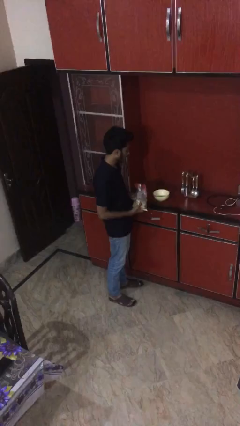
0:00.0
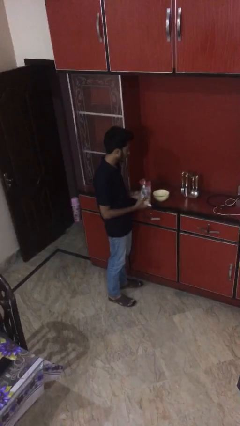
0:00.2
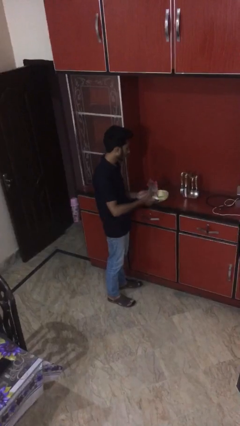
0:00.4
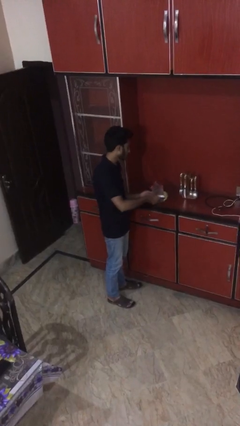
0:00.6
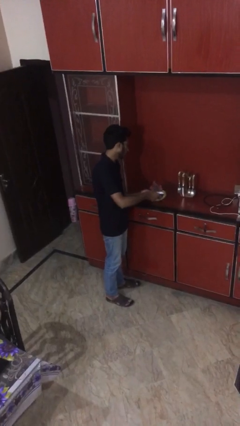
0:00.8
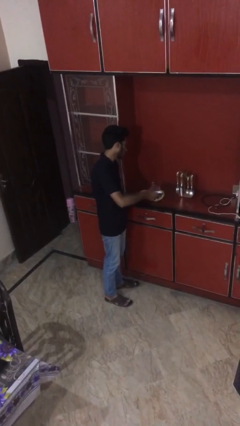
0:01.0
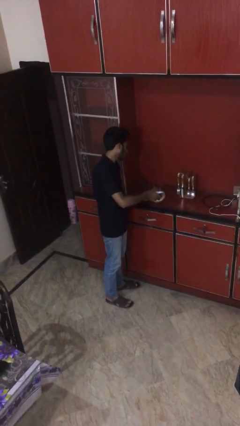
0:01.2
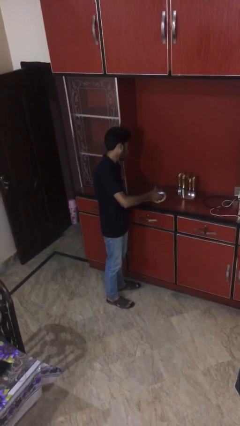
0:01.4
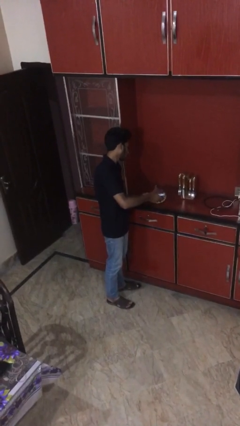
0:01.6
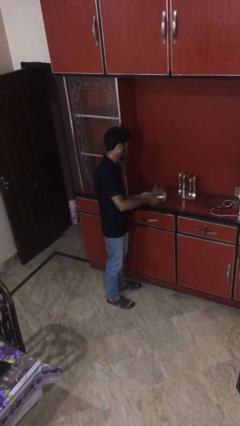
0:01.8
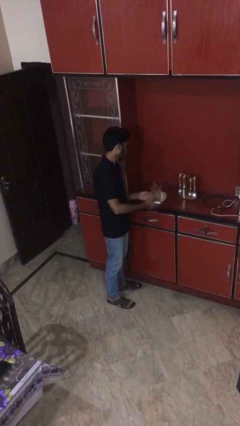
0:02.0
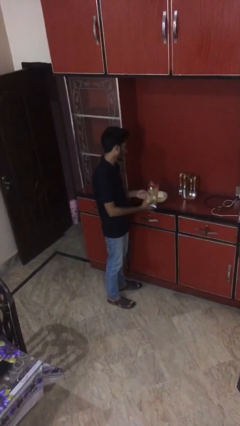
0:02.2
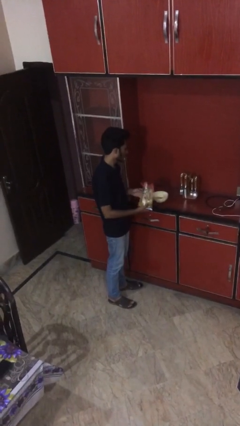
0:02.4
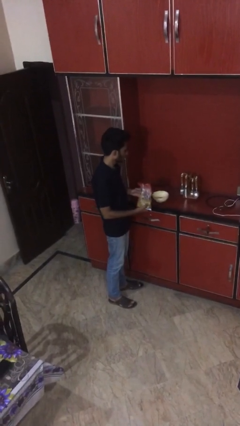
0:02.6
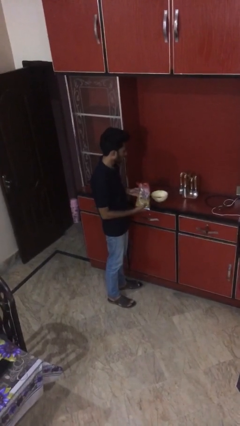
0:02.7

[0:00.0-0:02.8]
person pours into bowl

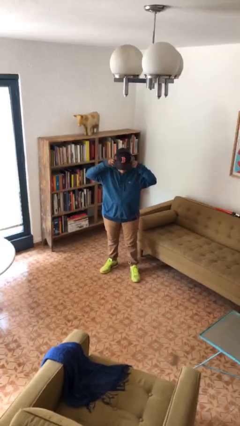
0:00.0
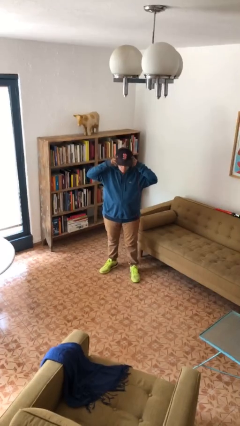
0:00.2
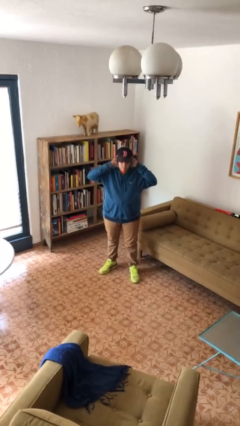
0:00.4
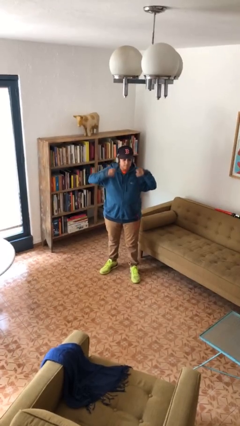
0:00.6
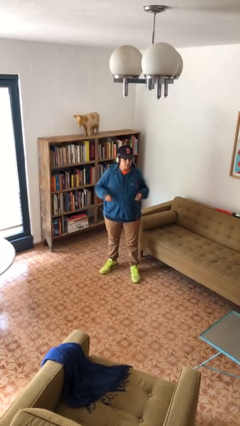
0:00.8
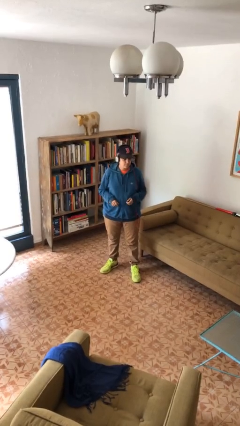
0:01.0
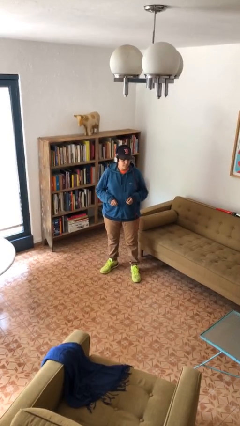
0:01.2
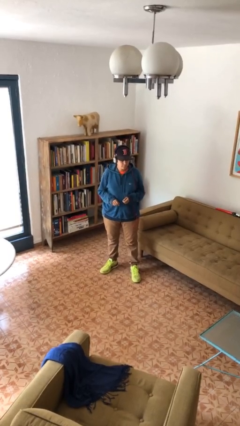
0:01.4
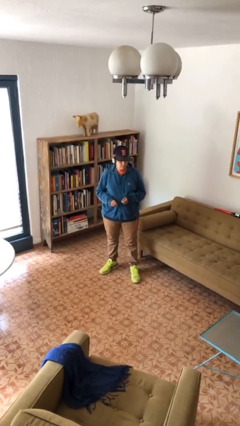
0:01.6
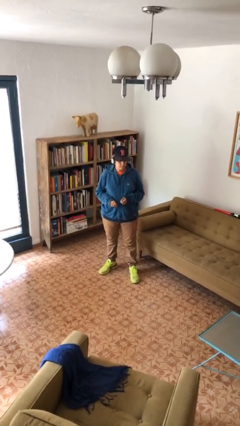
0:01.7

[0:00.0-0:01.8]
person puts on headphones

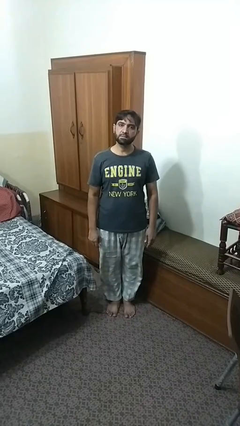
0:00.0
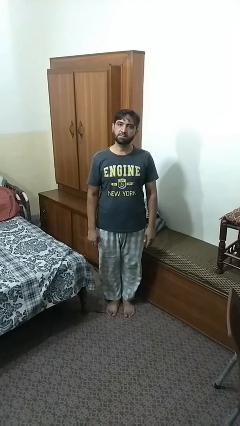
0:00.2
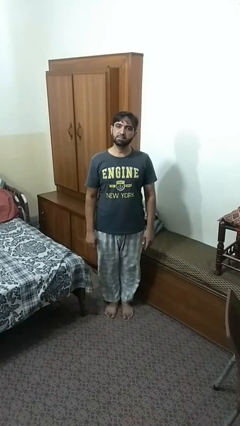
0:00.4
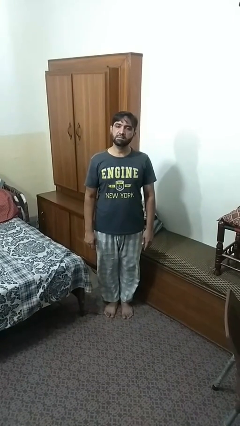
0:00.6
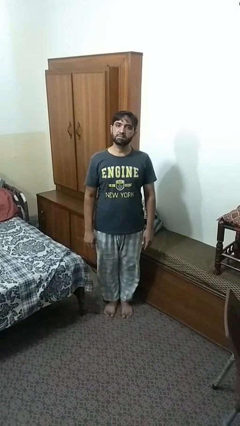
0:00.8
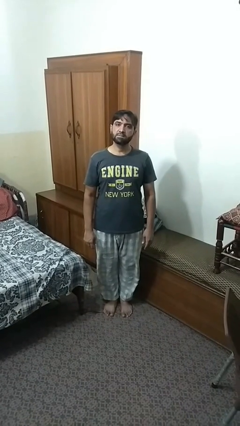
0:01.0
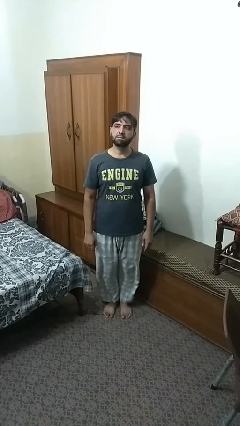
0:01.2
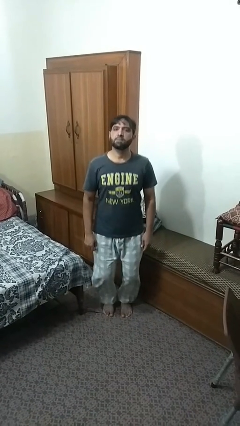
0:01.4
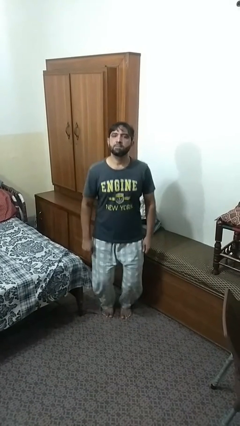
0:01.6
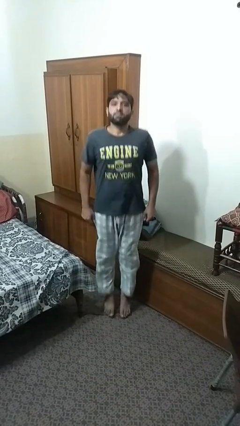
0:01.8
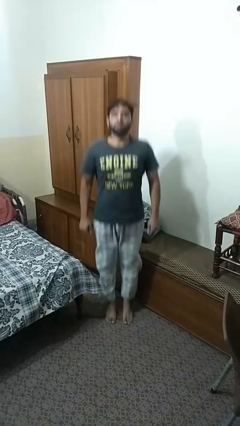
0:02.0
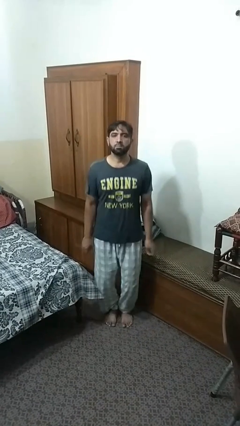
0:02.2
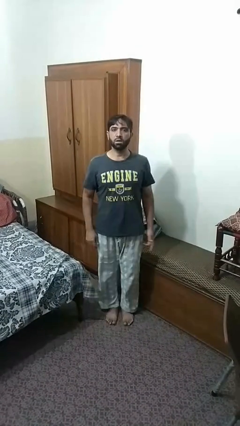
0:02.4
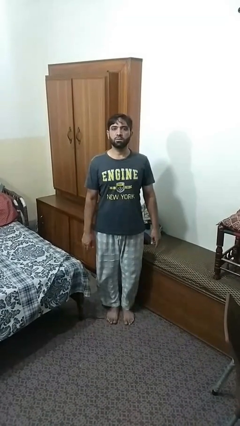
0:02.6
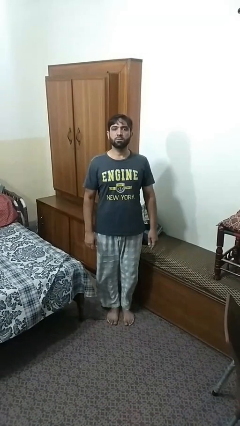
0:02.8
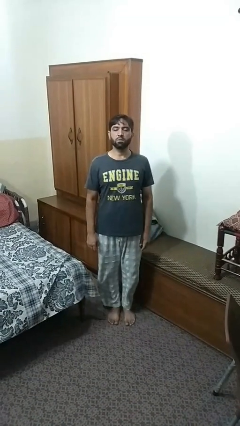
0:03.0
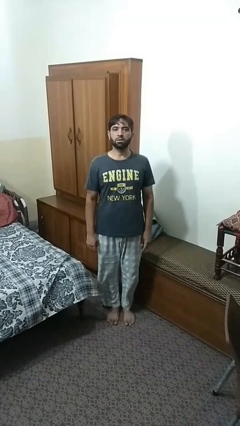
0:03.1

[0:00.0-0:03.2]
person jumps

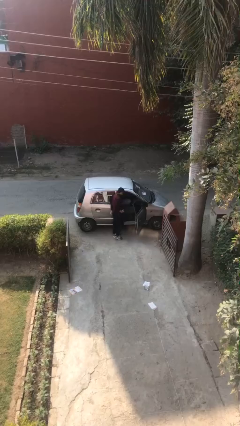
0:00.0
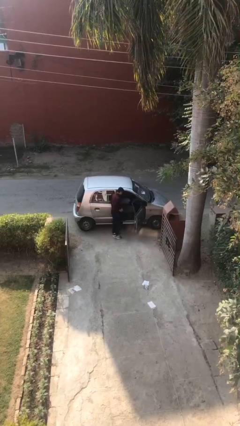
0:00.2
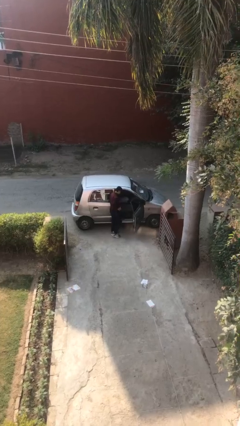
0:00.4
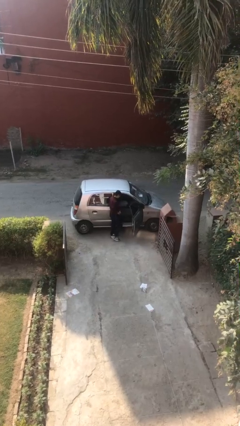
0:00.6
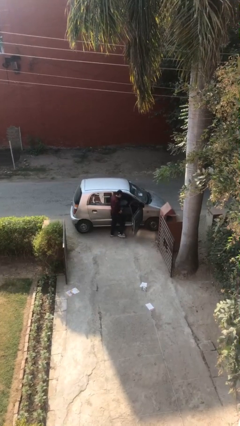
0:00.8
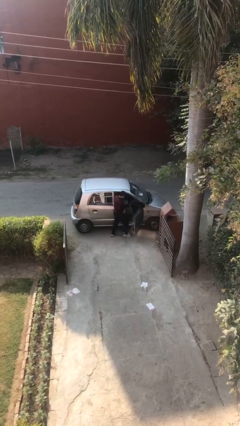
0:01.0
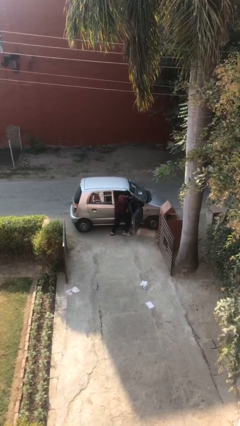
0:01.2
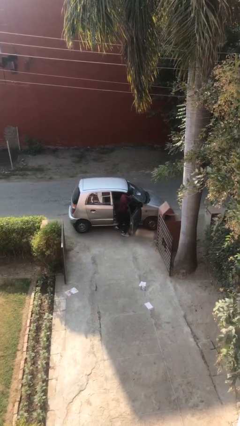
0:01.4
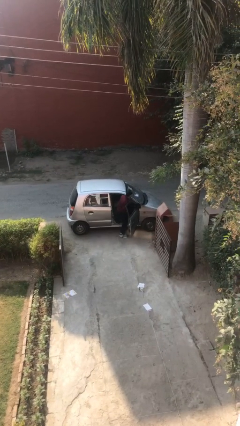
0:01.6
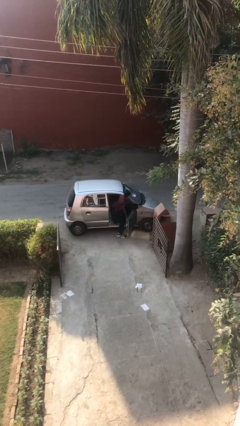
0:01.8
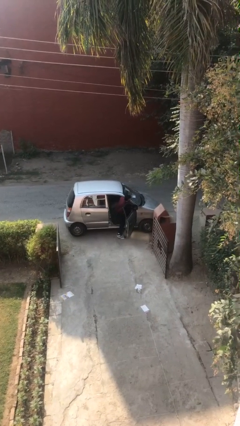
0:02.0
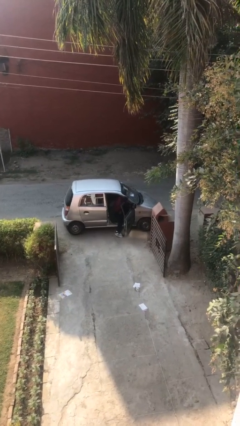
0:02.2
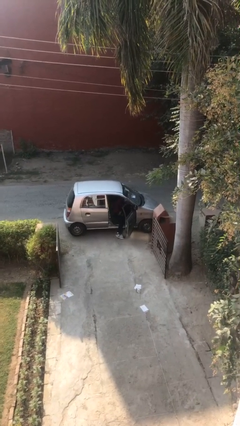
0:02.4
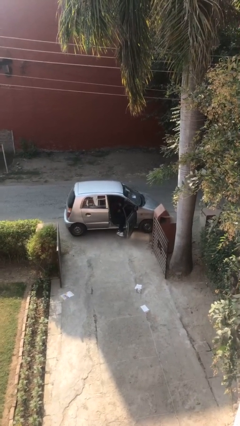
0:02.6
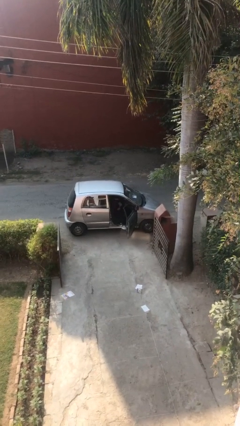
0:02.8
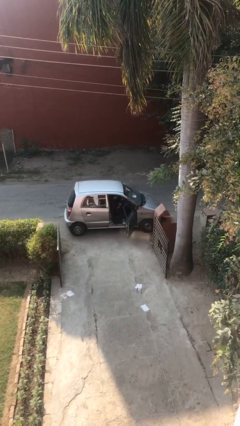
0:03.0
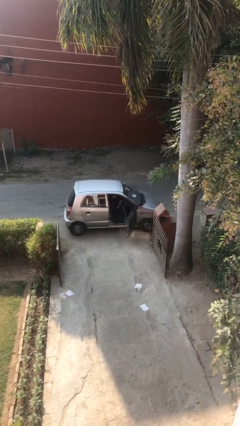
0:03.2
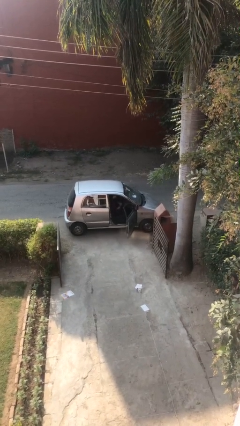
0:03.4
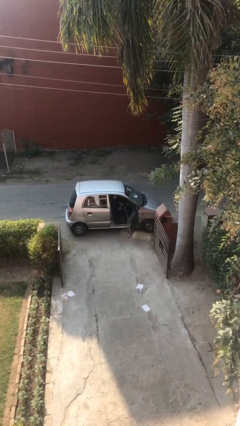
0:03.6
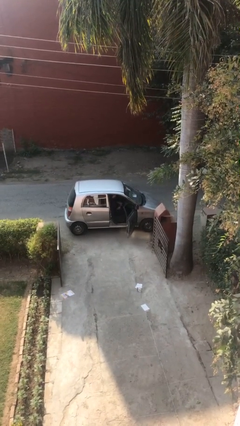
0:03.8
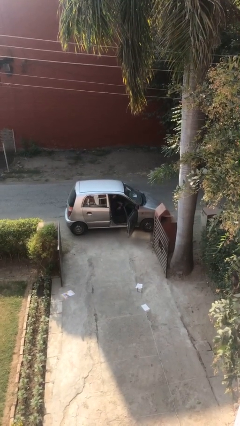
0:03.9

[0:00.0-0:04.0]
person enters car

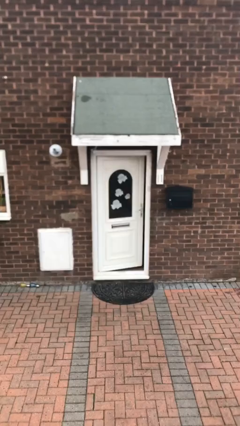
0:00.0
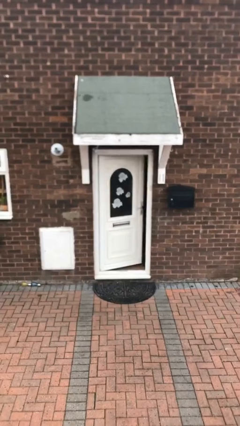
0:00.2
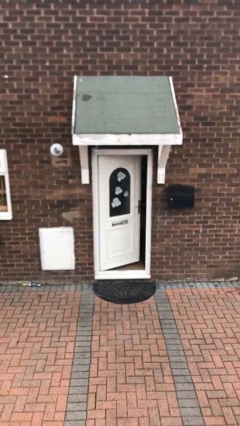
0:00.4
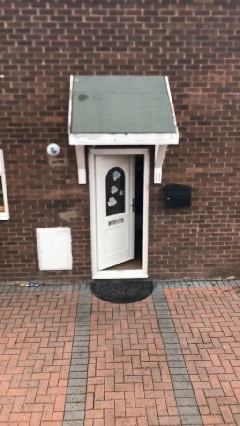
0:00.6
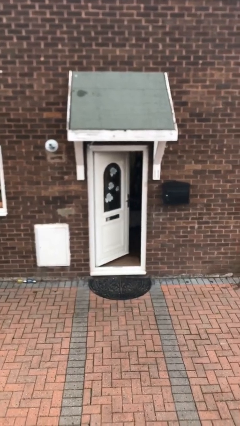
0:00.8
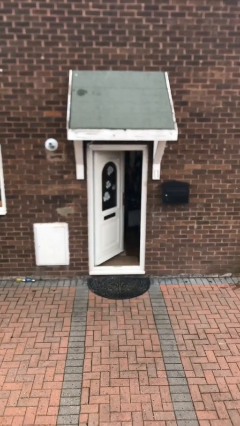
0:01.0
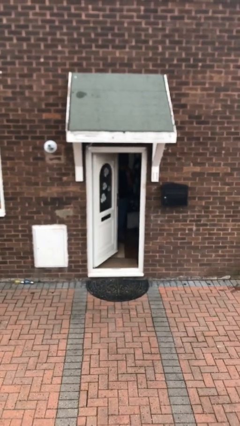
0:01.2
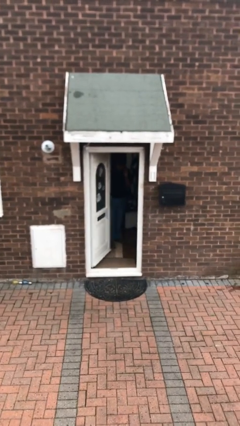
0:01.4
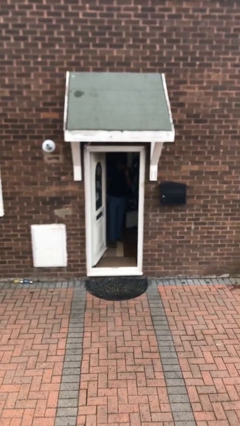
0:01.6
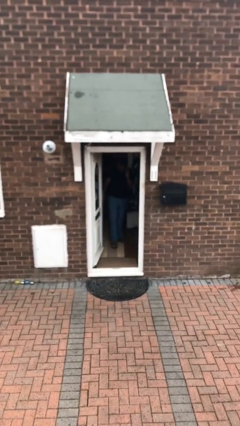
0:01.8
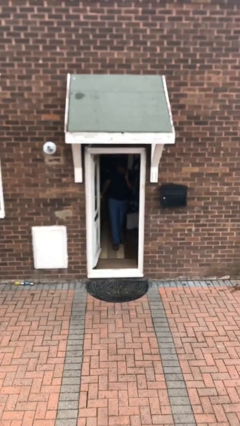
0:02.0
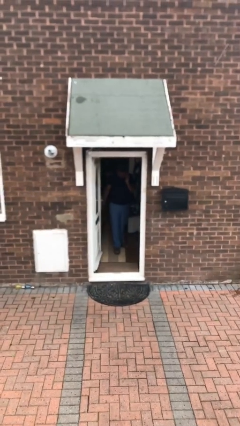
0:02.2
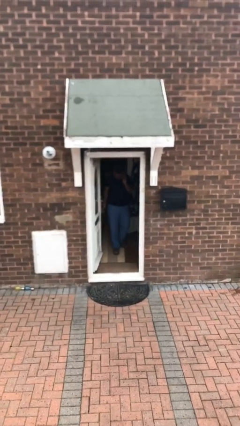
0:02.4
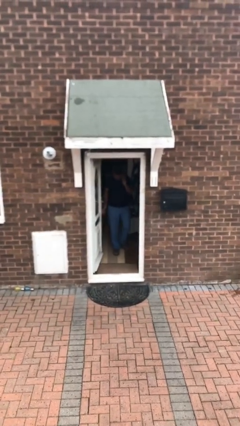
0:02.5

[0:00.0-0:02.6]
person opens facility door

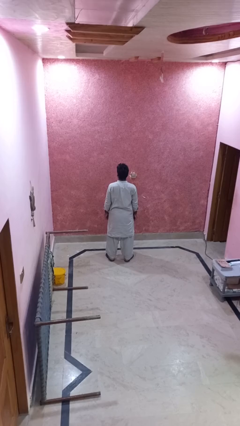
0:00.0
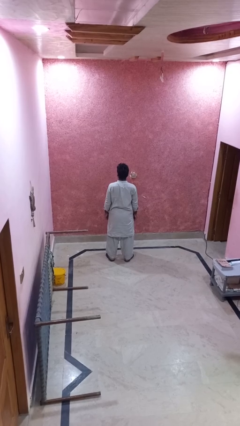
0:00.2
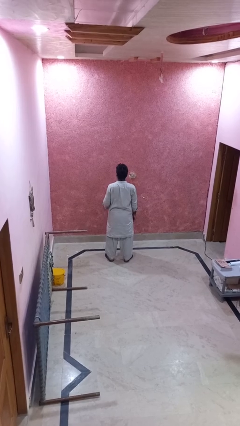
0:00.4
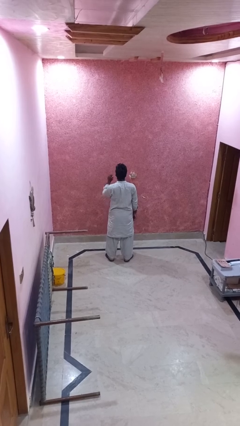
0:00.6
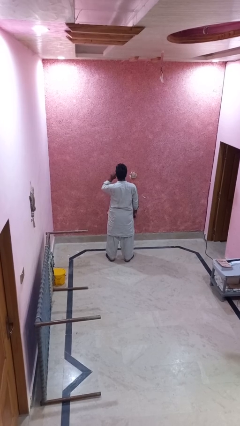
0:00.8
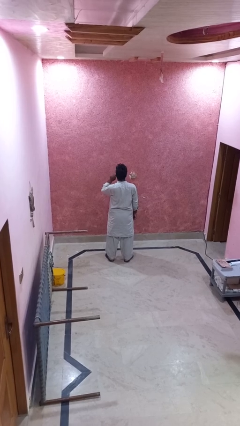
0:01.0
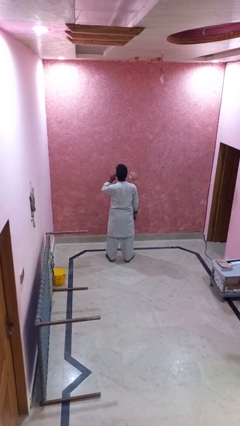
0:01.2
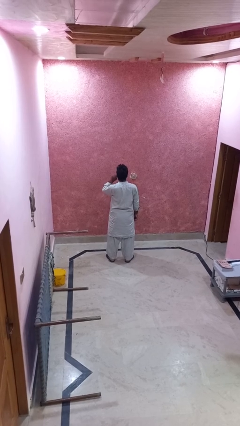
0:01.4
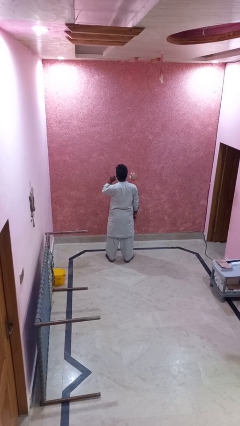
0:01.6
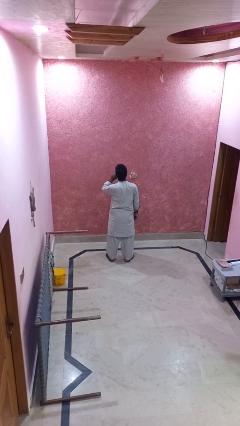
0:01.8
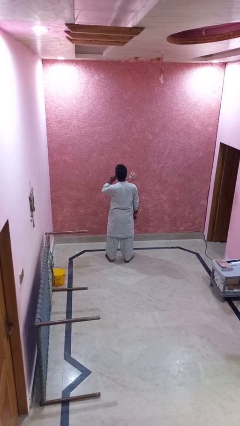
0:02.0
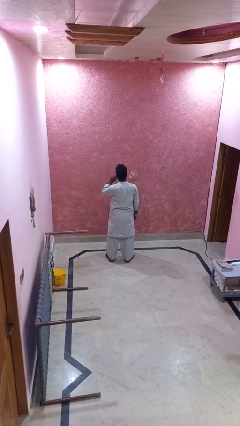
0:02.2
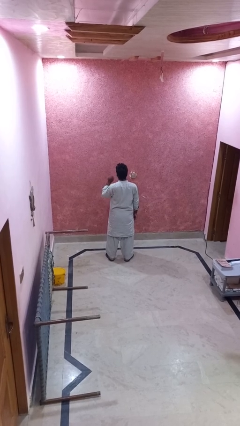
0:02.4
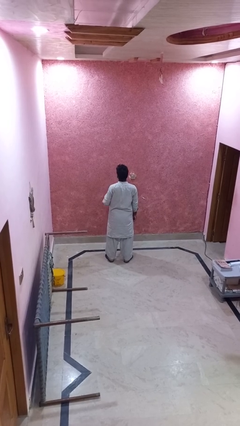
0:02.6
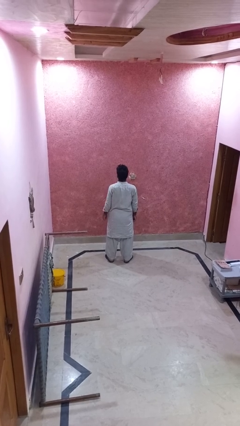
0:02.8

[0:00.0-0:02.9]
person touches earlobe

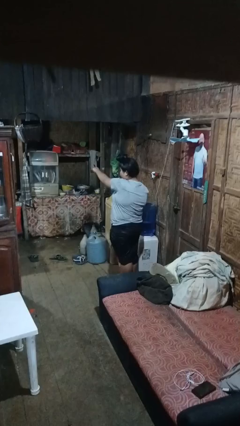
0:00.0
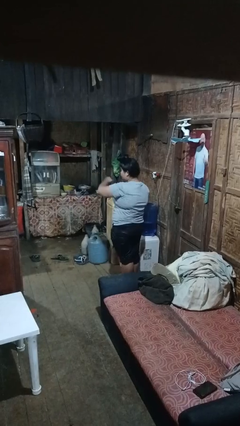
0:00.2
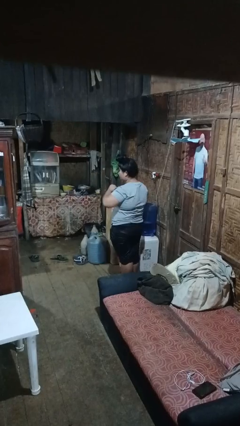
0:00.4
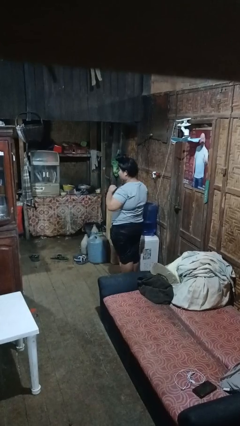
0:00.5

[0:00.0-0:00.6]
person punches
